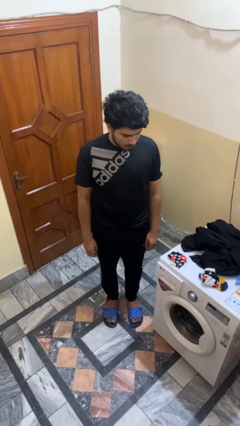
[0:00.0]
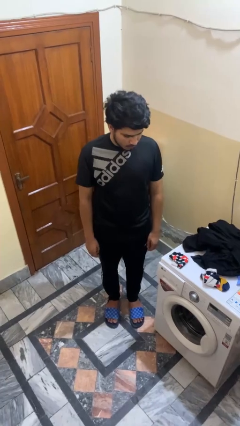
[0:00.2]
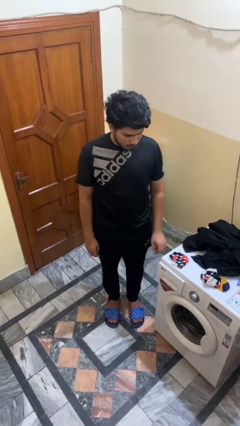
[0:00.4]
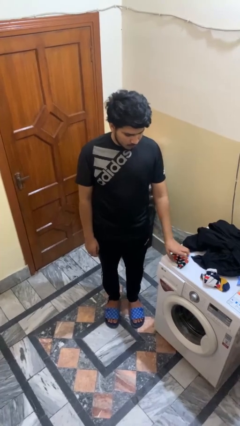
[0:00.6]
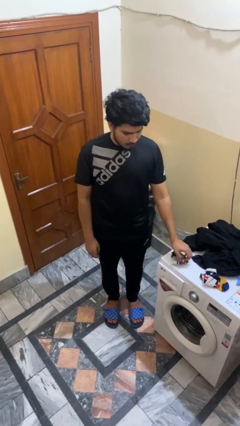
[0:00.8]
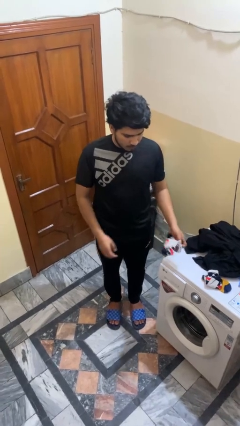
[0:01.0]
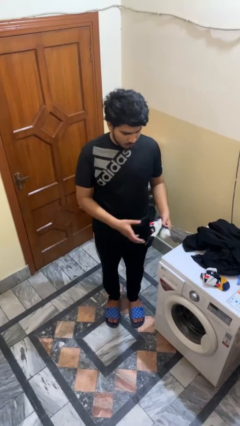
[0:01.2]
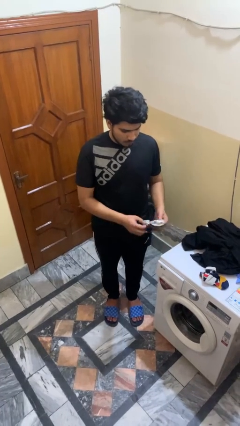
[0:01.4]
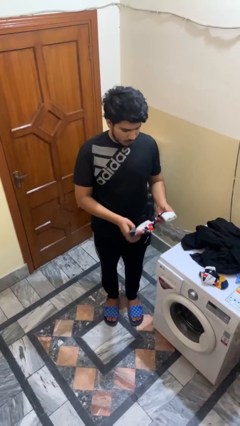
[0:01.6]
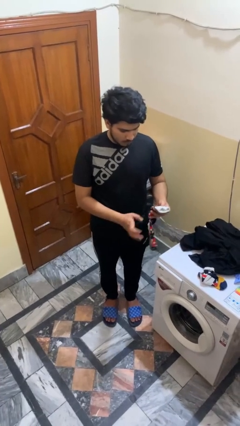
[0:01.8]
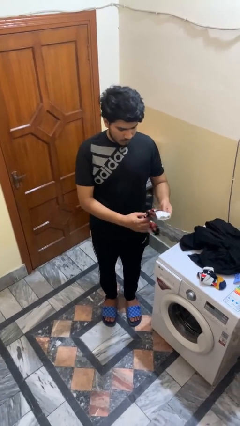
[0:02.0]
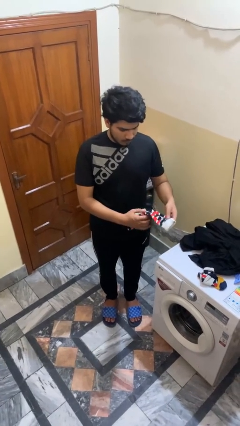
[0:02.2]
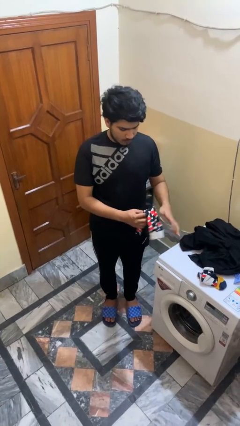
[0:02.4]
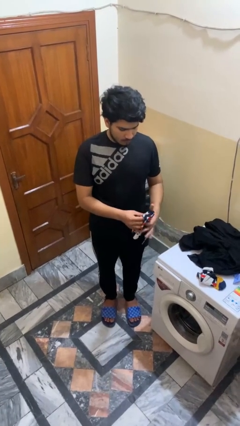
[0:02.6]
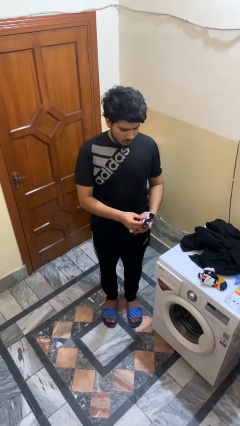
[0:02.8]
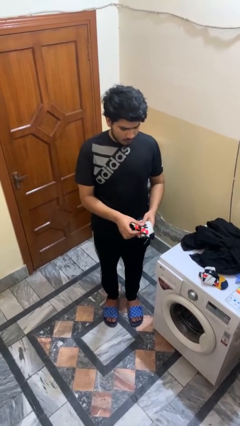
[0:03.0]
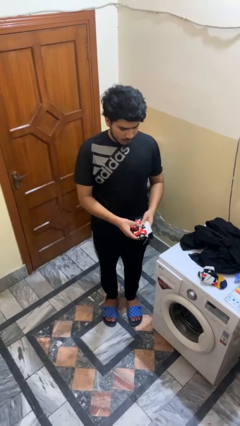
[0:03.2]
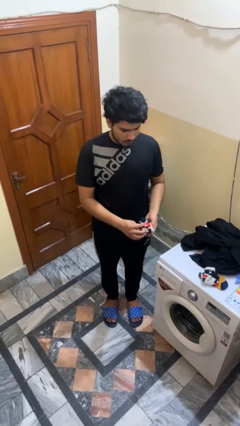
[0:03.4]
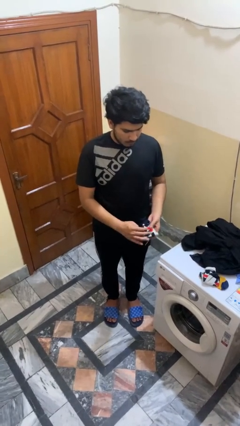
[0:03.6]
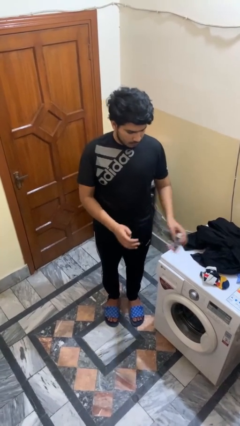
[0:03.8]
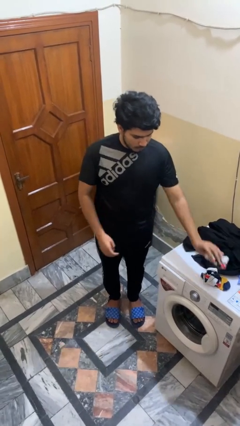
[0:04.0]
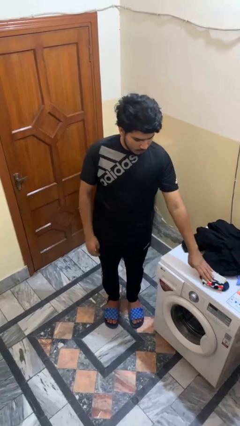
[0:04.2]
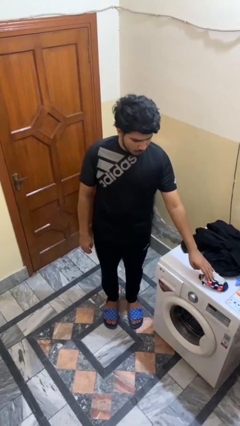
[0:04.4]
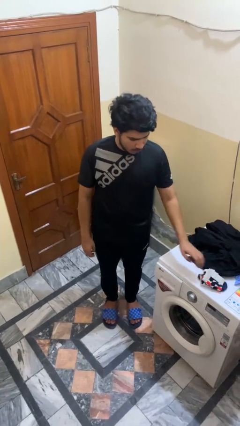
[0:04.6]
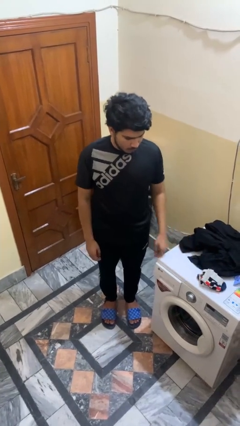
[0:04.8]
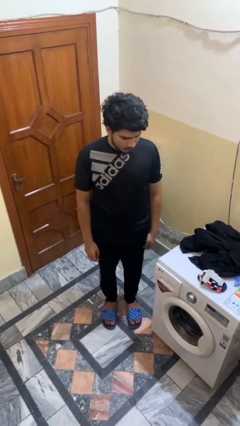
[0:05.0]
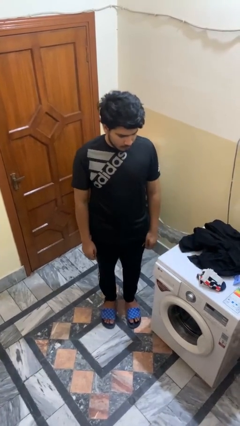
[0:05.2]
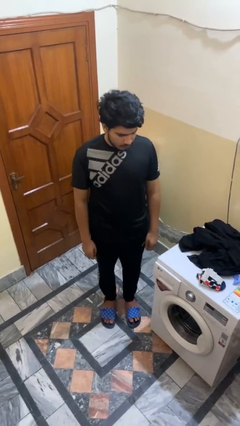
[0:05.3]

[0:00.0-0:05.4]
person folds socks

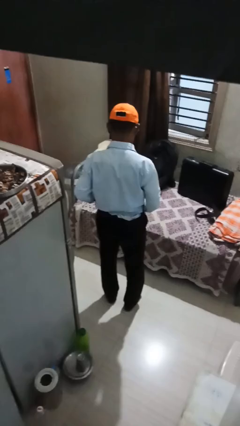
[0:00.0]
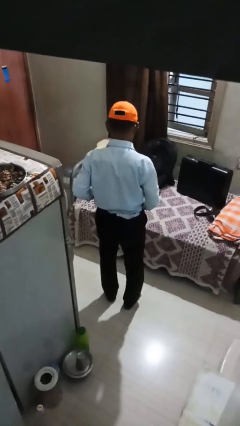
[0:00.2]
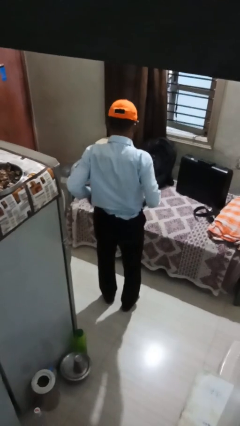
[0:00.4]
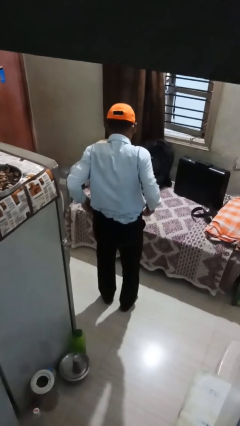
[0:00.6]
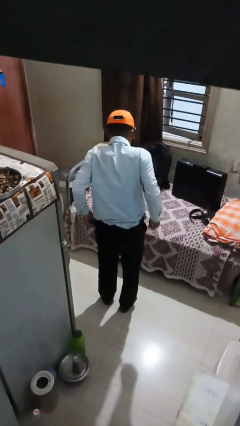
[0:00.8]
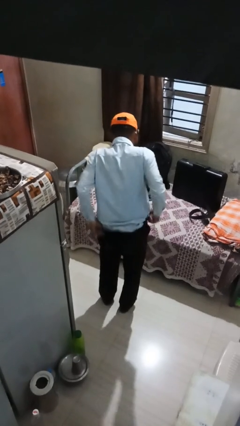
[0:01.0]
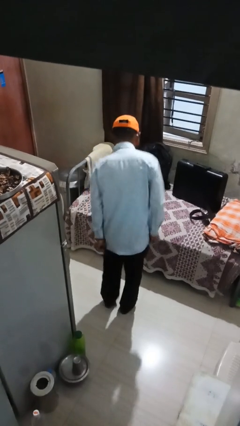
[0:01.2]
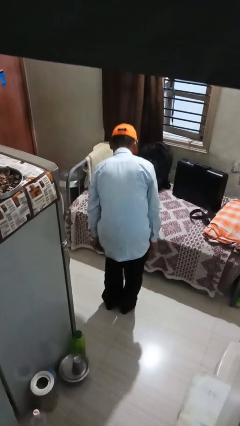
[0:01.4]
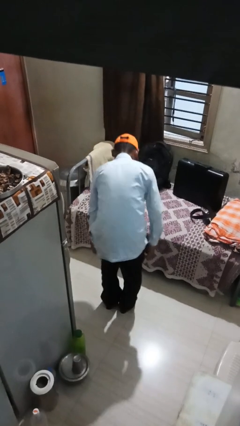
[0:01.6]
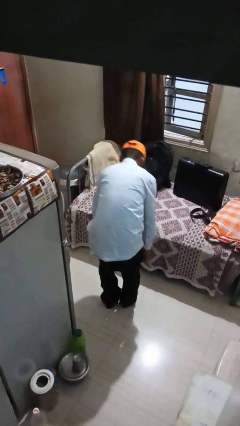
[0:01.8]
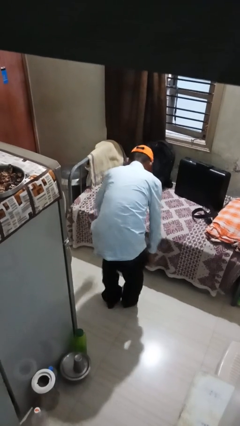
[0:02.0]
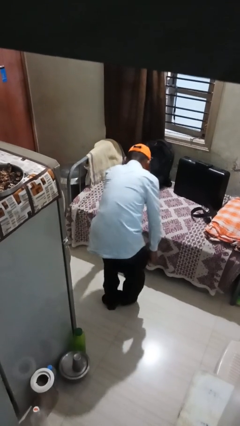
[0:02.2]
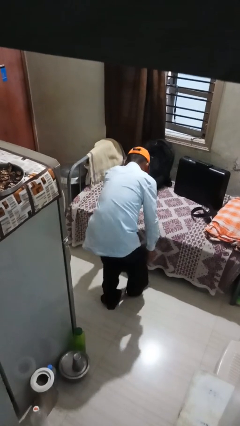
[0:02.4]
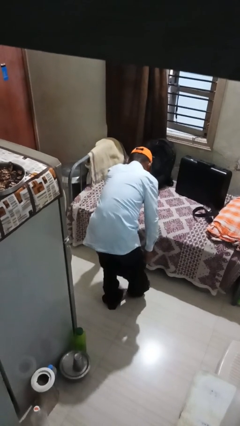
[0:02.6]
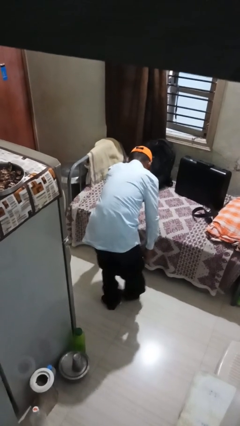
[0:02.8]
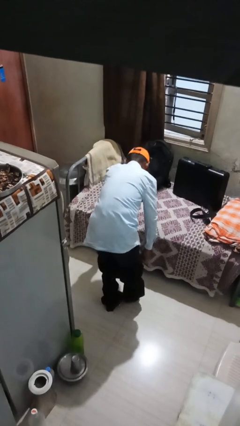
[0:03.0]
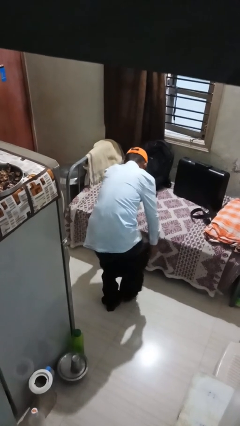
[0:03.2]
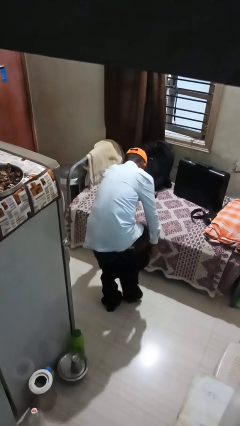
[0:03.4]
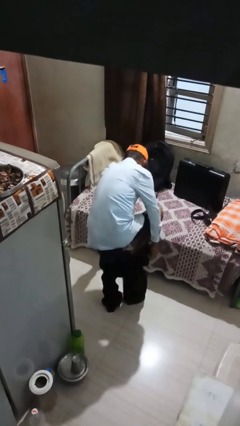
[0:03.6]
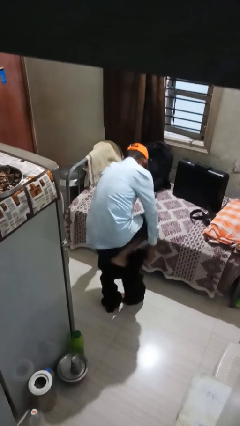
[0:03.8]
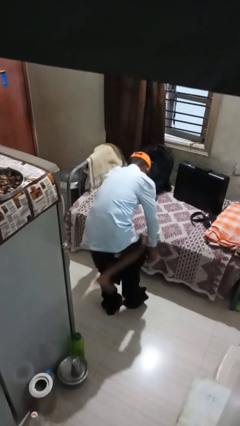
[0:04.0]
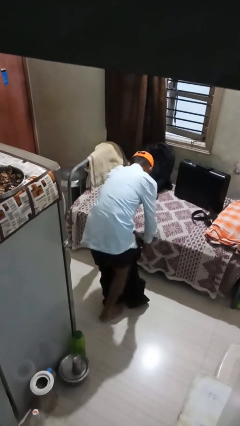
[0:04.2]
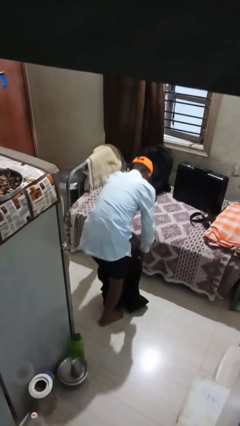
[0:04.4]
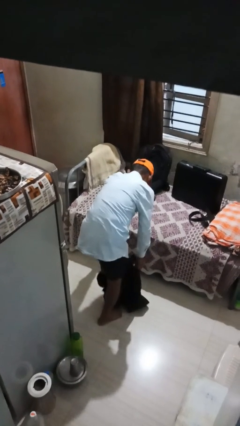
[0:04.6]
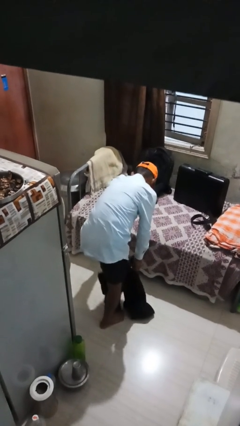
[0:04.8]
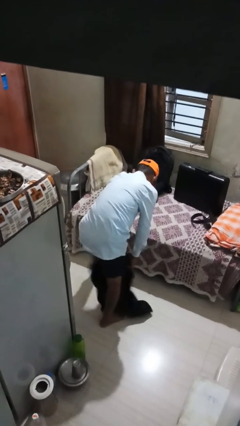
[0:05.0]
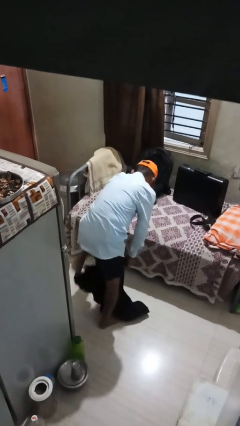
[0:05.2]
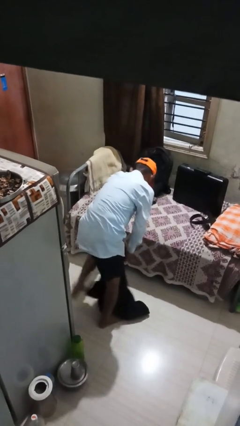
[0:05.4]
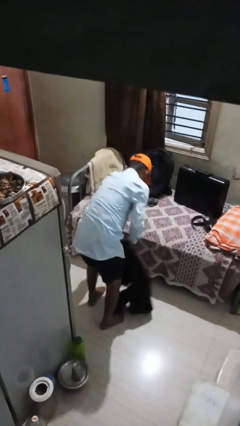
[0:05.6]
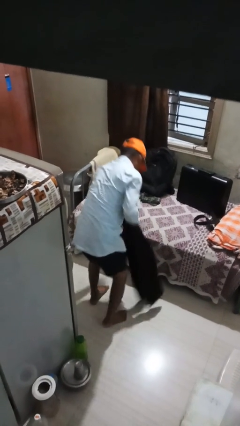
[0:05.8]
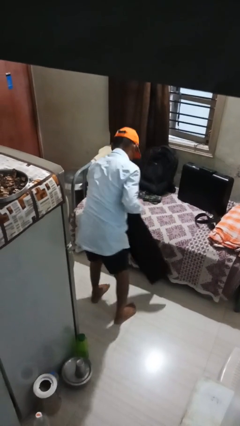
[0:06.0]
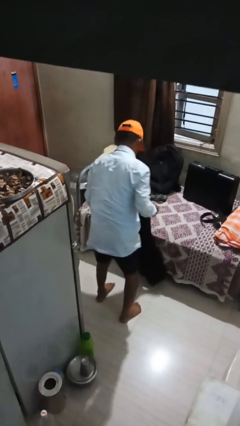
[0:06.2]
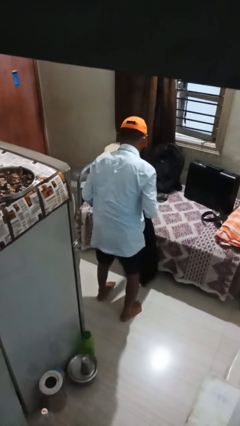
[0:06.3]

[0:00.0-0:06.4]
person takes off pants

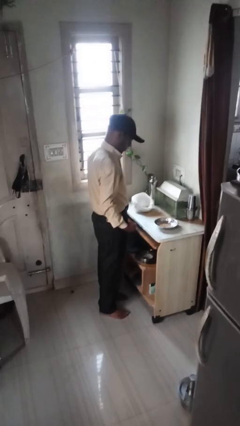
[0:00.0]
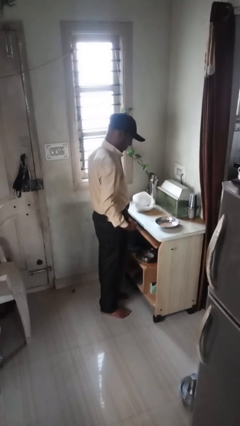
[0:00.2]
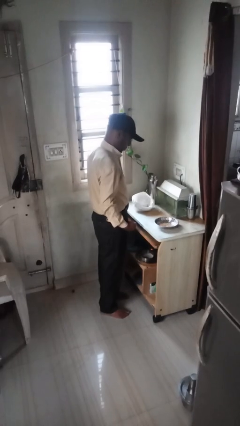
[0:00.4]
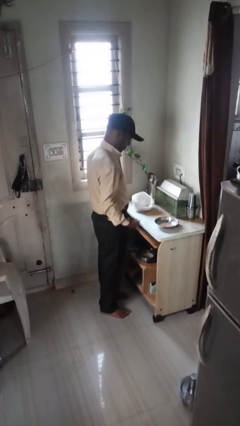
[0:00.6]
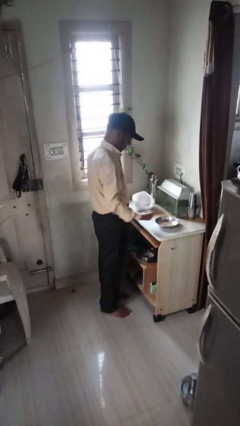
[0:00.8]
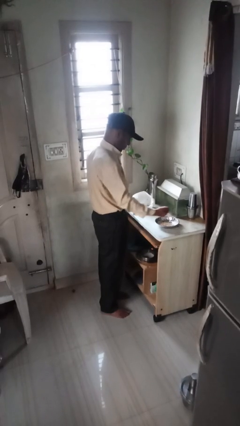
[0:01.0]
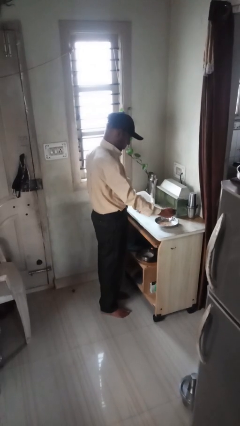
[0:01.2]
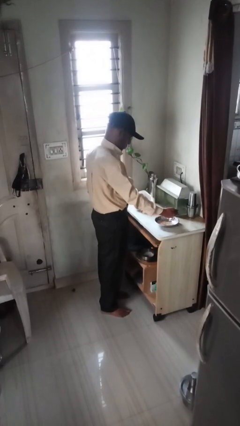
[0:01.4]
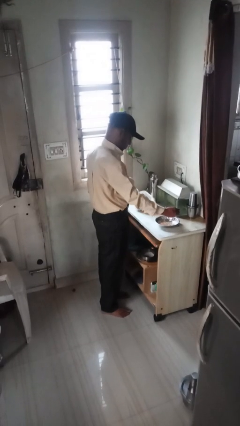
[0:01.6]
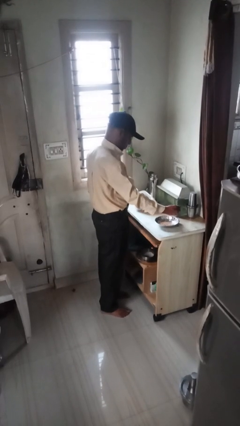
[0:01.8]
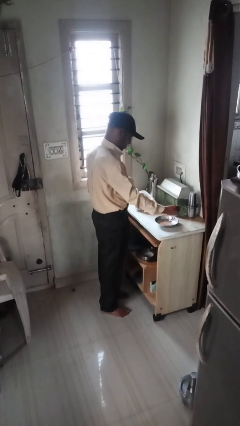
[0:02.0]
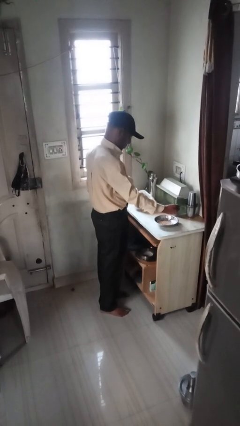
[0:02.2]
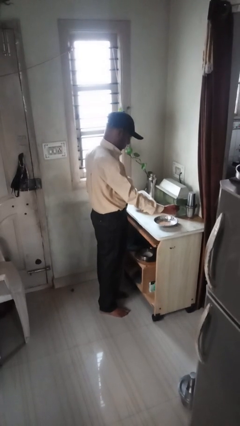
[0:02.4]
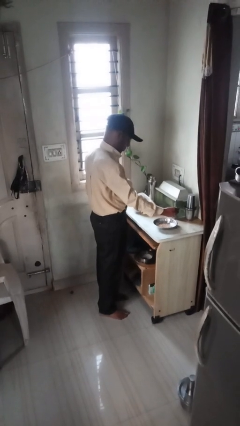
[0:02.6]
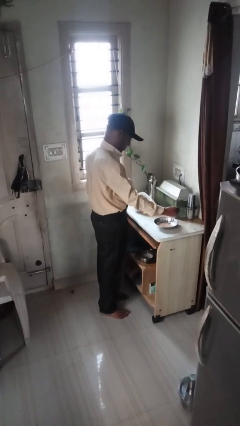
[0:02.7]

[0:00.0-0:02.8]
person pours into bowl

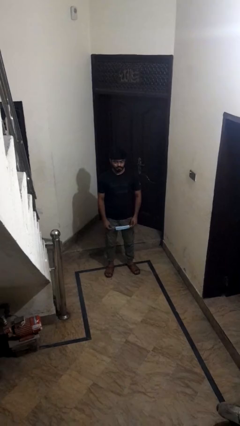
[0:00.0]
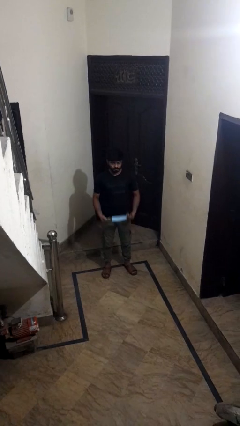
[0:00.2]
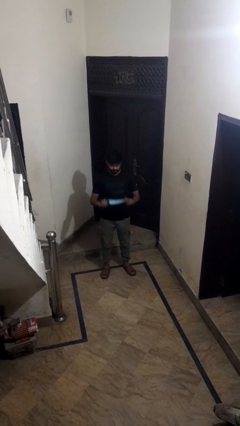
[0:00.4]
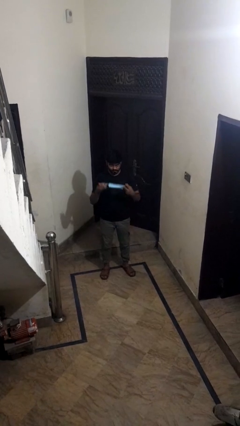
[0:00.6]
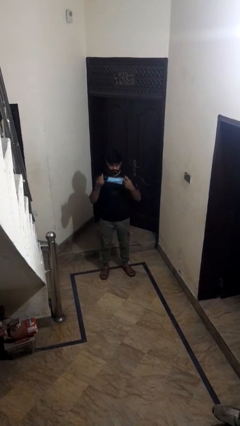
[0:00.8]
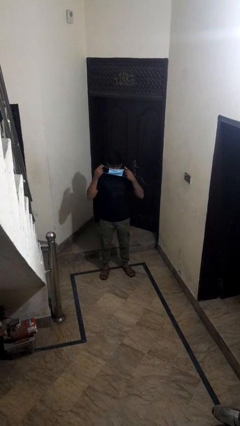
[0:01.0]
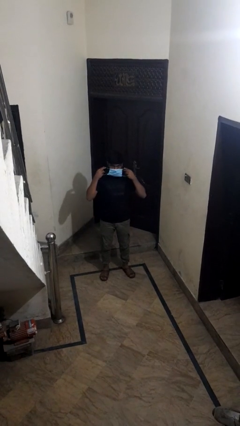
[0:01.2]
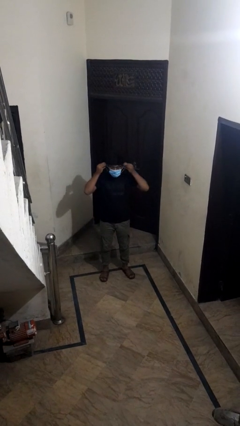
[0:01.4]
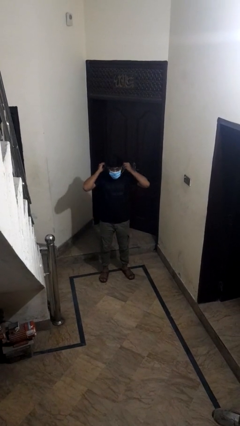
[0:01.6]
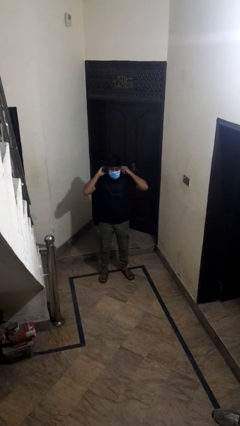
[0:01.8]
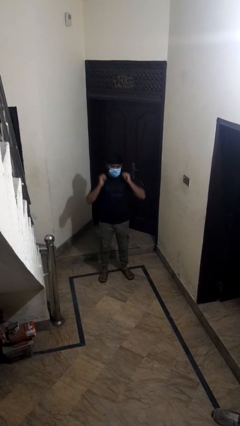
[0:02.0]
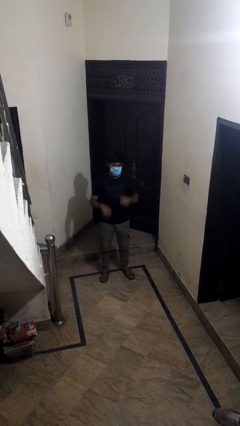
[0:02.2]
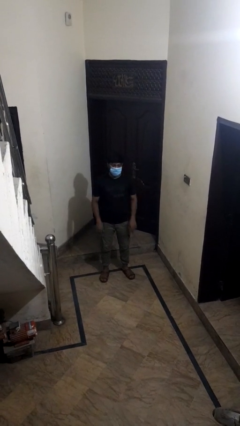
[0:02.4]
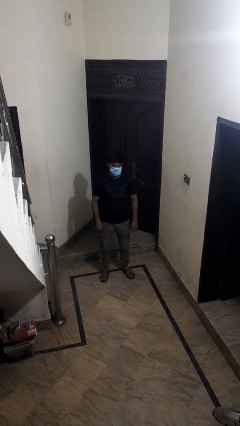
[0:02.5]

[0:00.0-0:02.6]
person puts on facemask

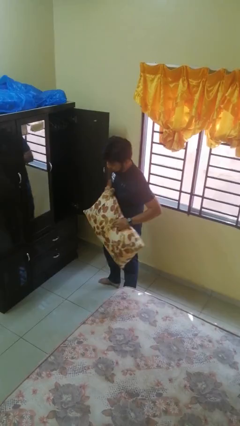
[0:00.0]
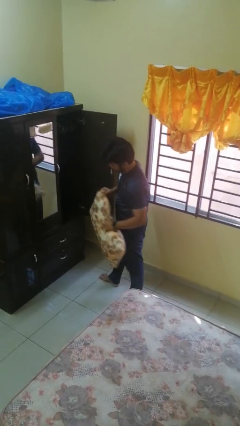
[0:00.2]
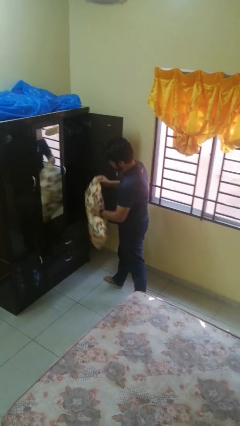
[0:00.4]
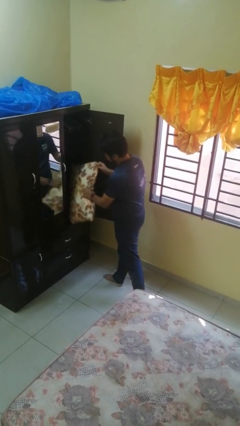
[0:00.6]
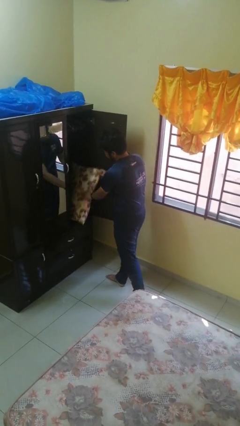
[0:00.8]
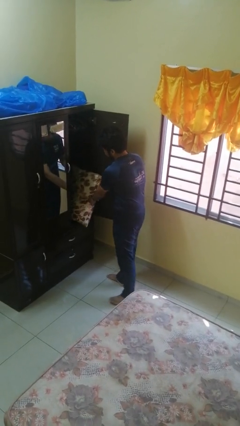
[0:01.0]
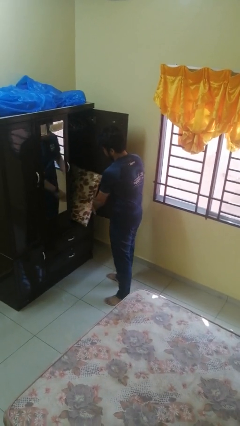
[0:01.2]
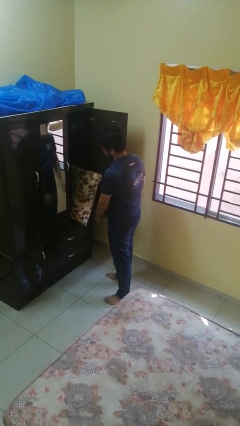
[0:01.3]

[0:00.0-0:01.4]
person puts down object into cabinet
